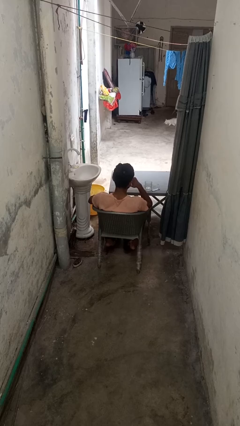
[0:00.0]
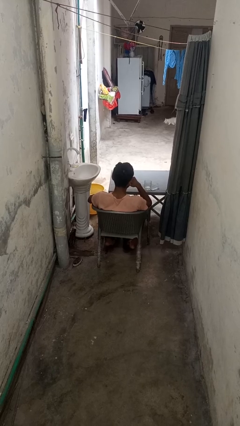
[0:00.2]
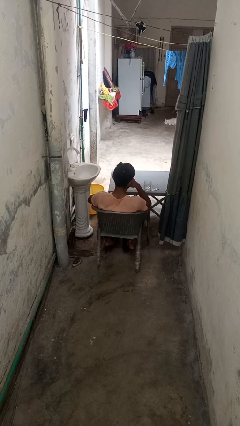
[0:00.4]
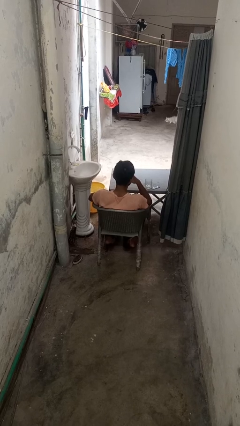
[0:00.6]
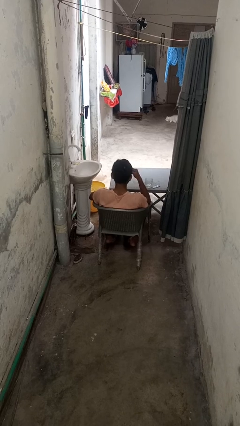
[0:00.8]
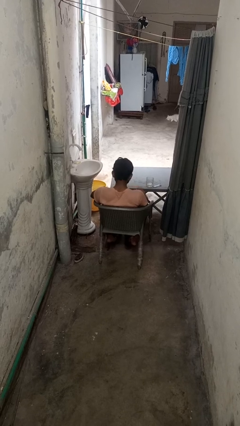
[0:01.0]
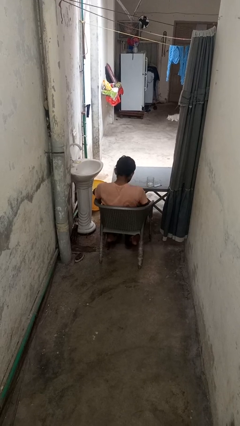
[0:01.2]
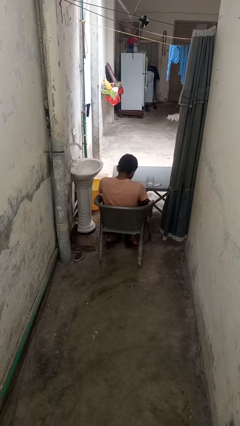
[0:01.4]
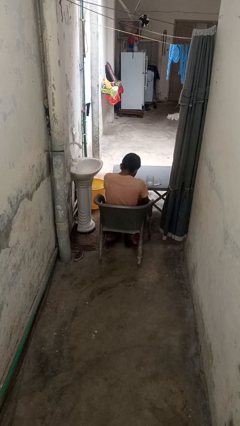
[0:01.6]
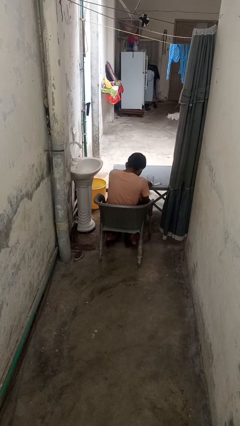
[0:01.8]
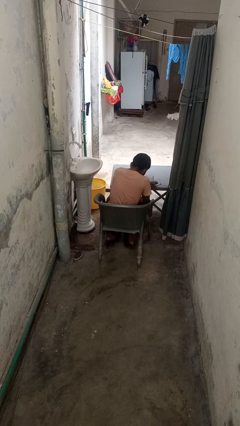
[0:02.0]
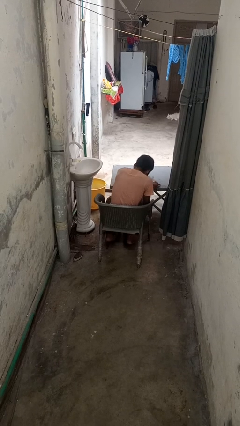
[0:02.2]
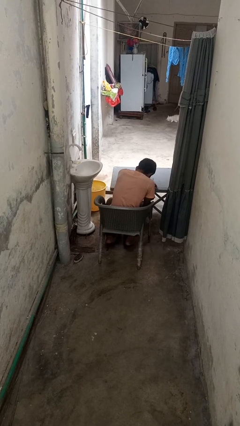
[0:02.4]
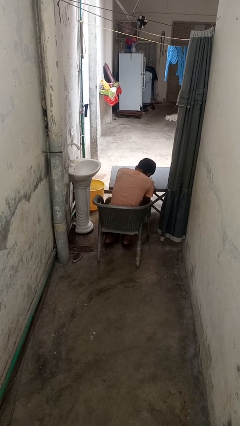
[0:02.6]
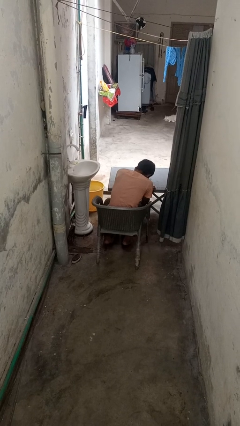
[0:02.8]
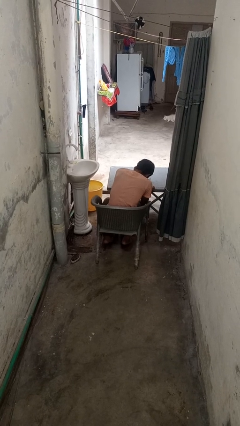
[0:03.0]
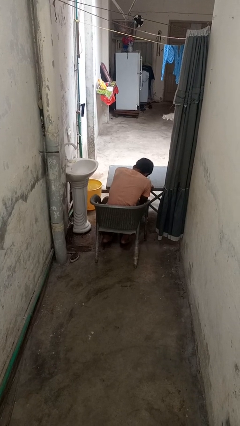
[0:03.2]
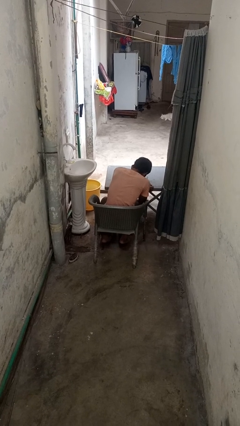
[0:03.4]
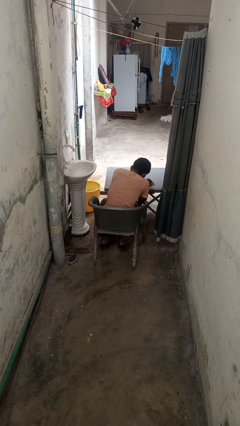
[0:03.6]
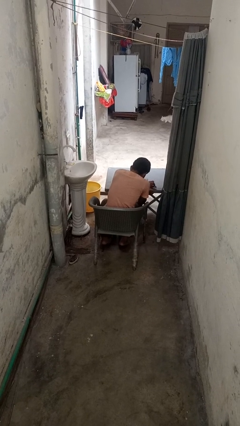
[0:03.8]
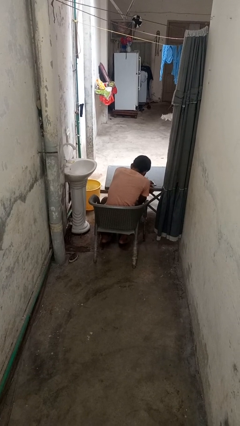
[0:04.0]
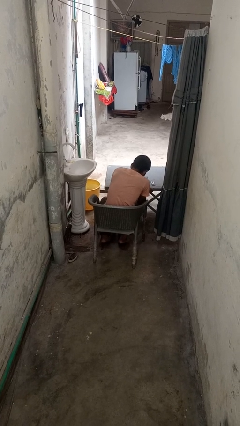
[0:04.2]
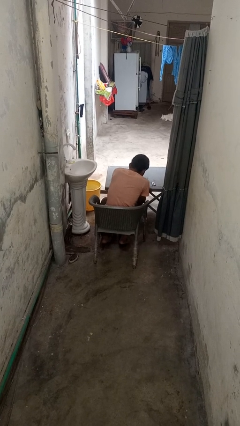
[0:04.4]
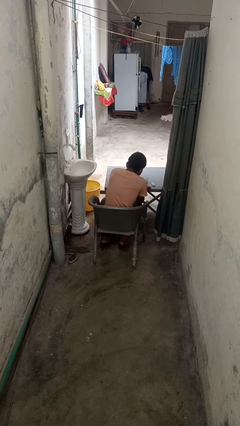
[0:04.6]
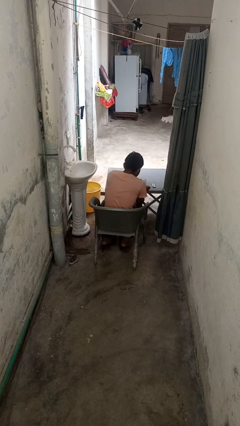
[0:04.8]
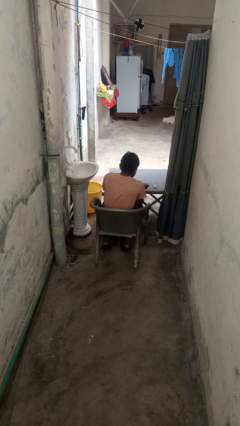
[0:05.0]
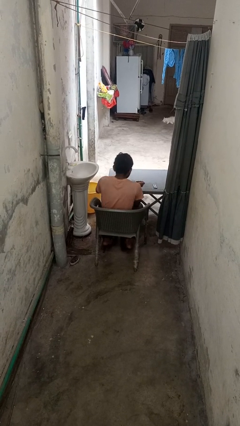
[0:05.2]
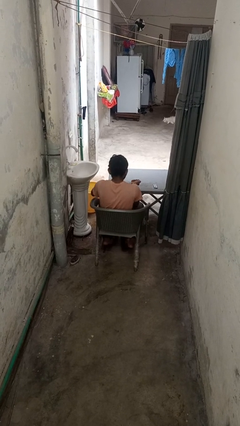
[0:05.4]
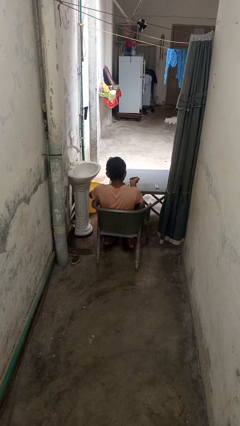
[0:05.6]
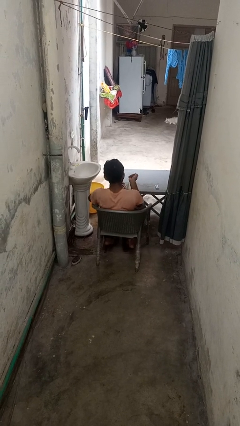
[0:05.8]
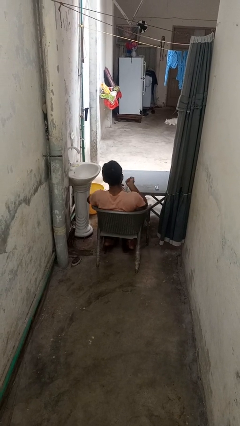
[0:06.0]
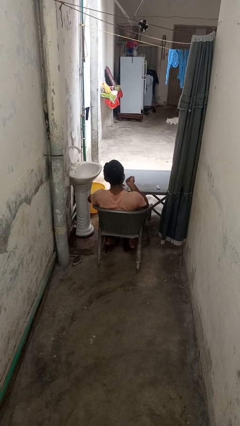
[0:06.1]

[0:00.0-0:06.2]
person takes medicine pills

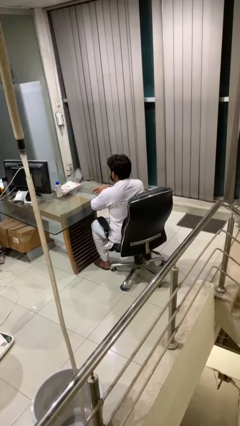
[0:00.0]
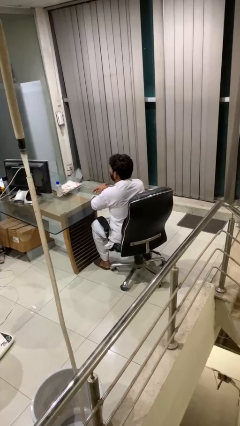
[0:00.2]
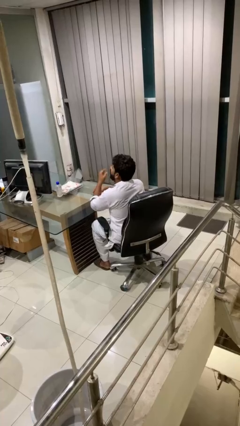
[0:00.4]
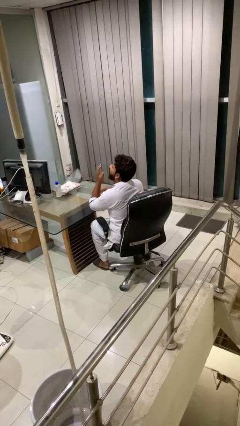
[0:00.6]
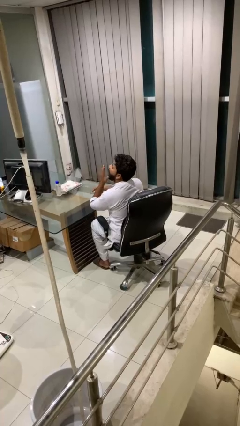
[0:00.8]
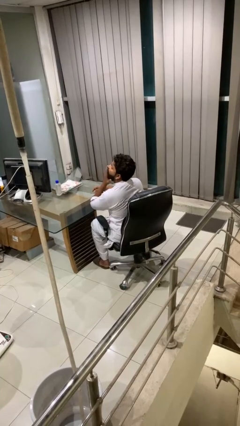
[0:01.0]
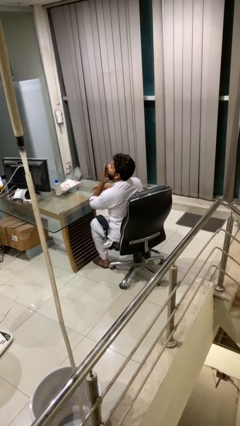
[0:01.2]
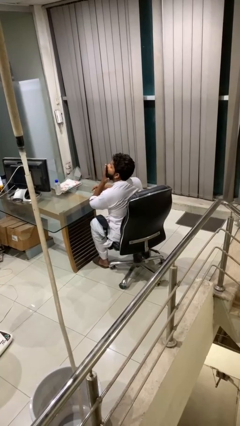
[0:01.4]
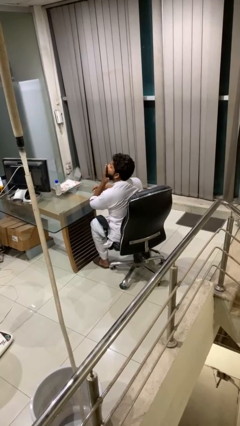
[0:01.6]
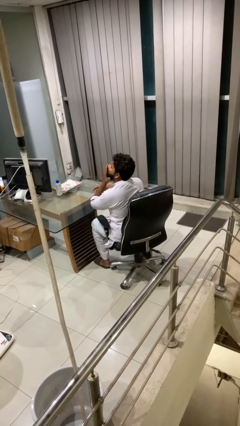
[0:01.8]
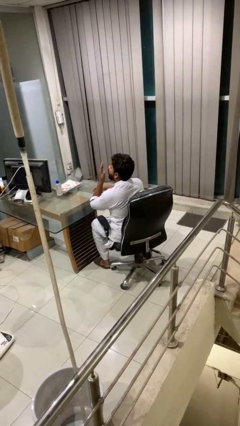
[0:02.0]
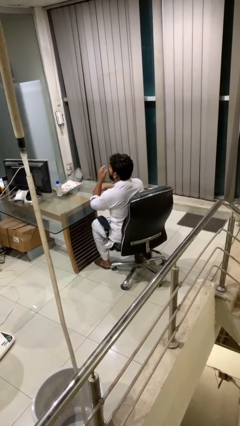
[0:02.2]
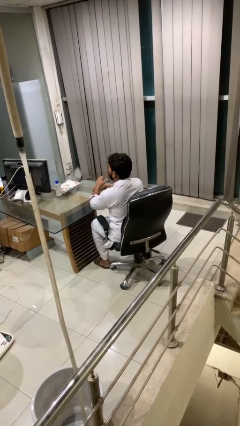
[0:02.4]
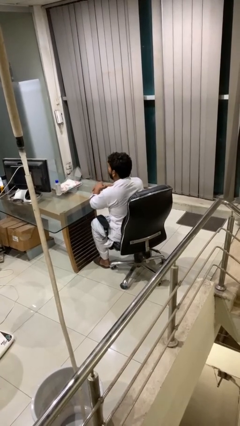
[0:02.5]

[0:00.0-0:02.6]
person yawns

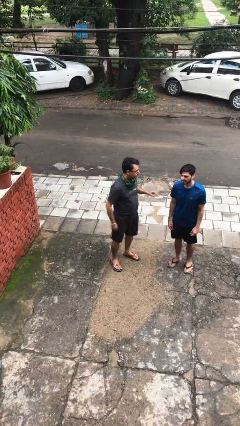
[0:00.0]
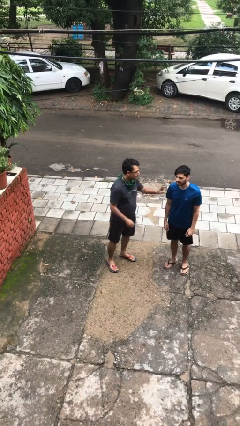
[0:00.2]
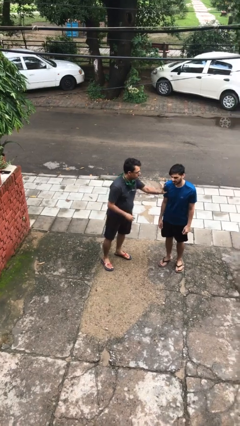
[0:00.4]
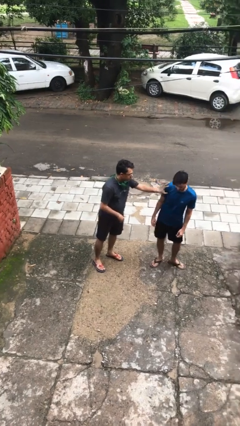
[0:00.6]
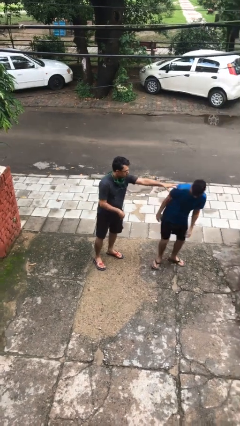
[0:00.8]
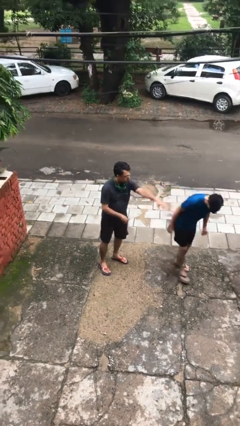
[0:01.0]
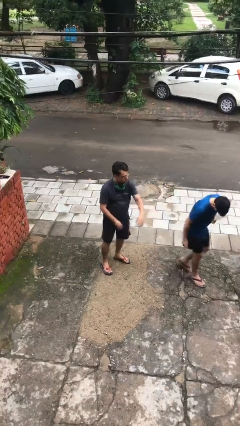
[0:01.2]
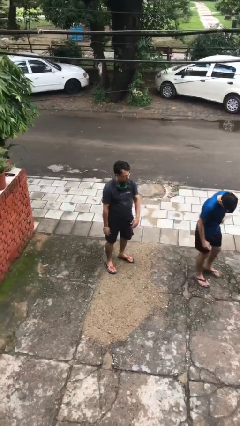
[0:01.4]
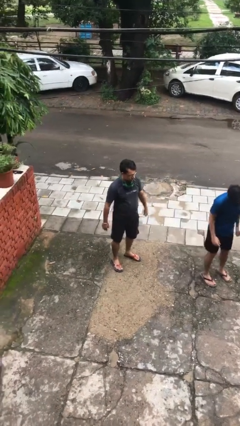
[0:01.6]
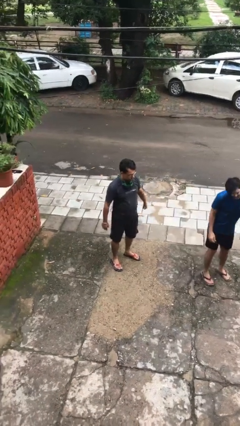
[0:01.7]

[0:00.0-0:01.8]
person shoves person

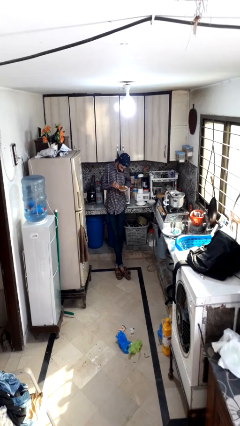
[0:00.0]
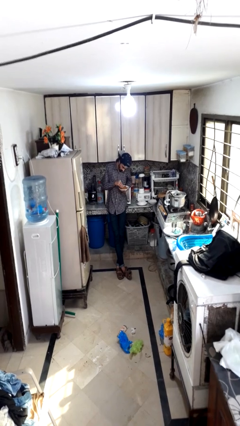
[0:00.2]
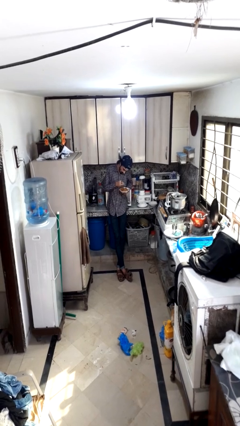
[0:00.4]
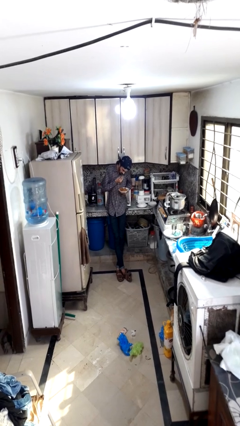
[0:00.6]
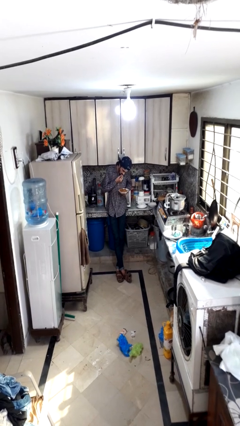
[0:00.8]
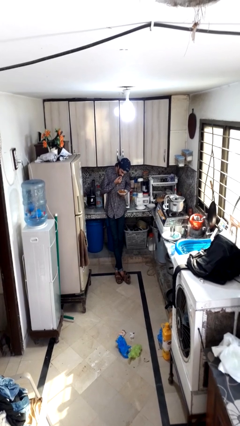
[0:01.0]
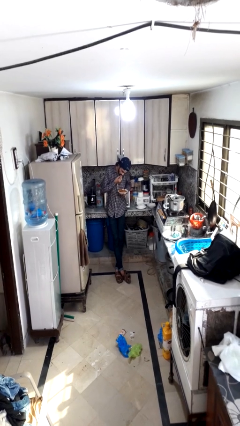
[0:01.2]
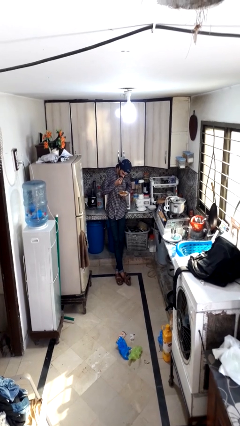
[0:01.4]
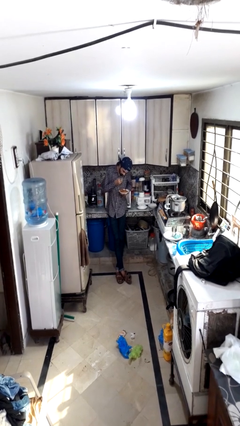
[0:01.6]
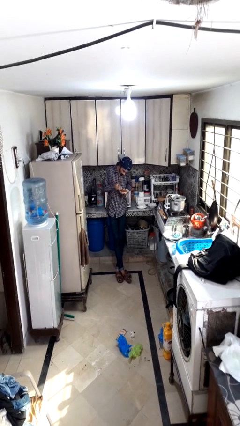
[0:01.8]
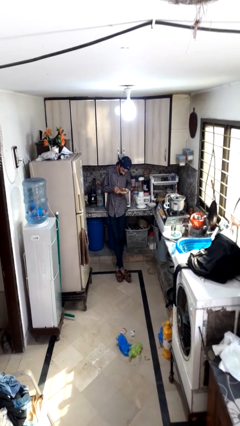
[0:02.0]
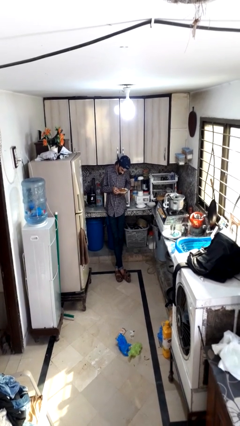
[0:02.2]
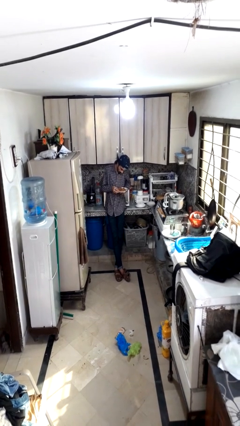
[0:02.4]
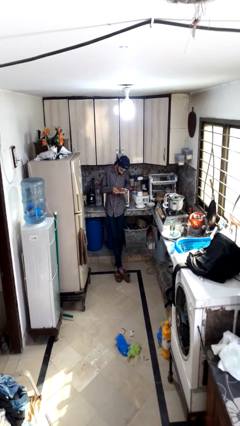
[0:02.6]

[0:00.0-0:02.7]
person eats with hands

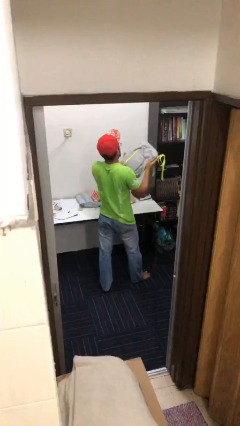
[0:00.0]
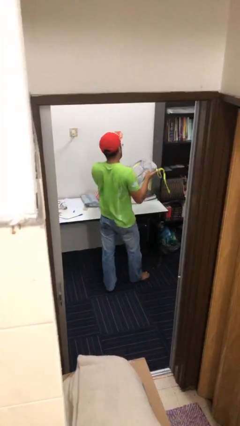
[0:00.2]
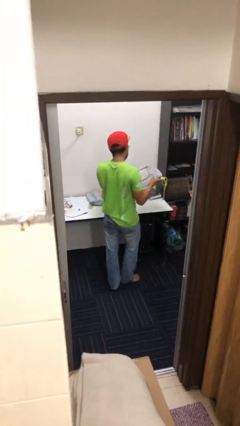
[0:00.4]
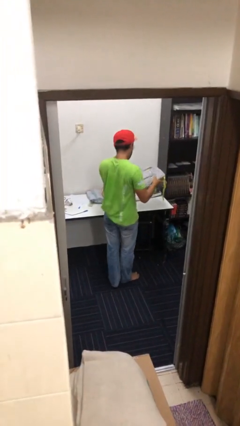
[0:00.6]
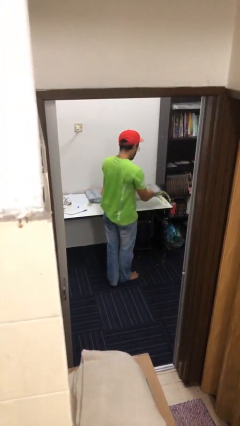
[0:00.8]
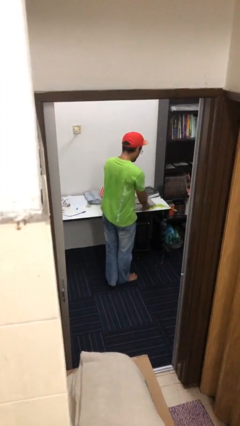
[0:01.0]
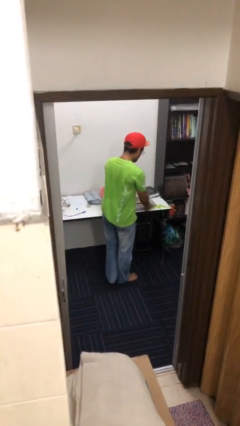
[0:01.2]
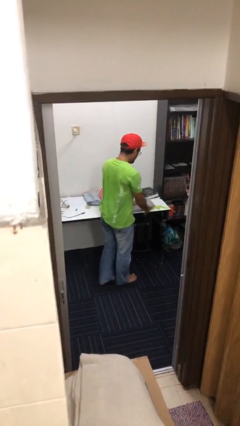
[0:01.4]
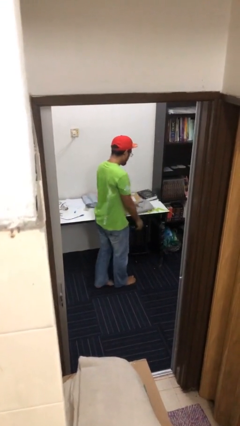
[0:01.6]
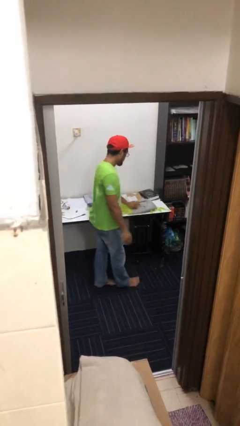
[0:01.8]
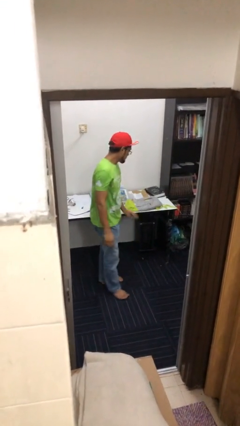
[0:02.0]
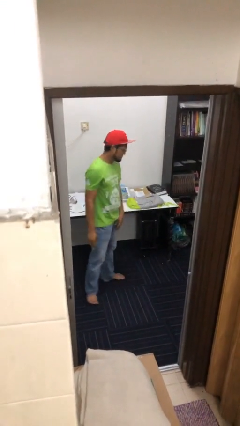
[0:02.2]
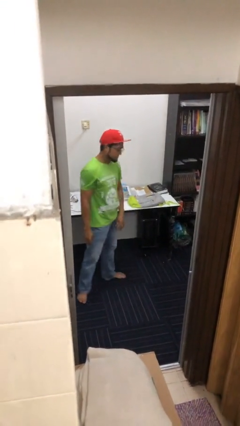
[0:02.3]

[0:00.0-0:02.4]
person puts down object on table

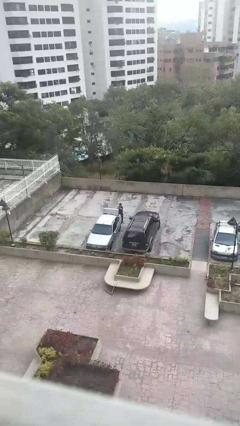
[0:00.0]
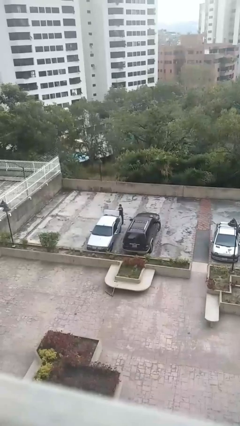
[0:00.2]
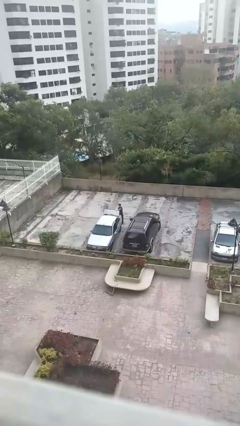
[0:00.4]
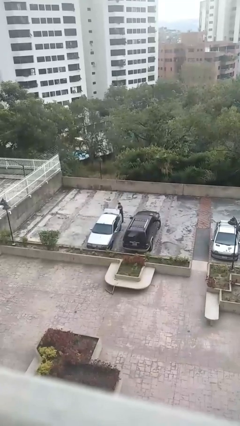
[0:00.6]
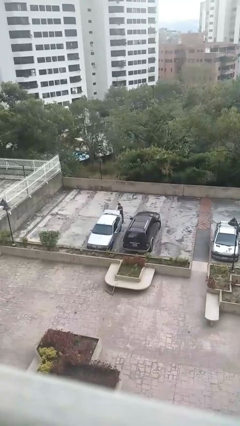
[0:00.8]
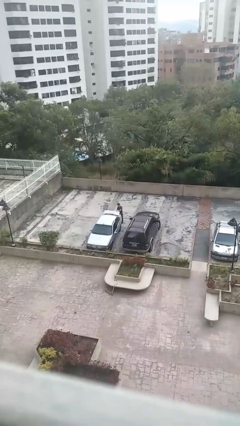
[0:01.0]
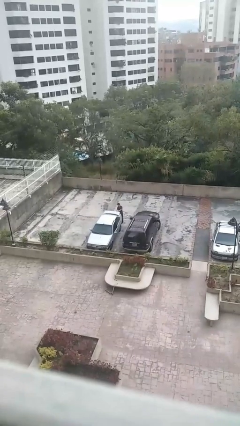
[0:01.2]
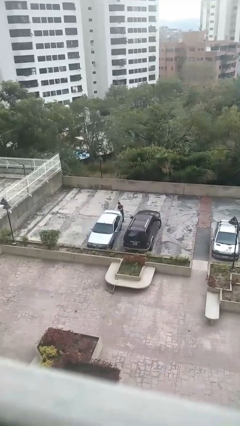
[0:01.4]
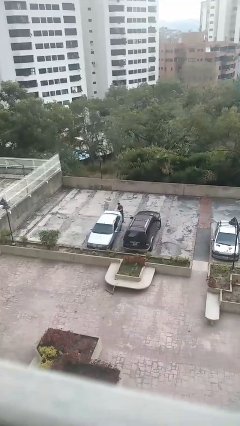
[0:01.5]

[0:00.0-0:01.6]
person closes car trunk

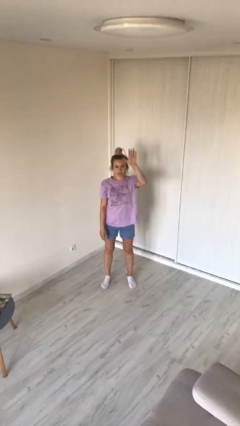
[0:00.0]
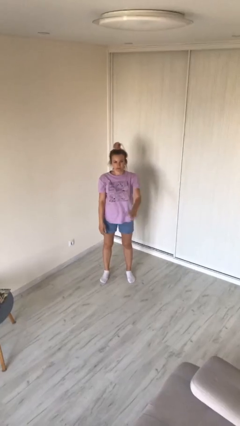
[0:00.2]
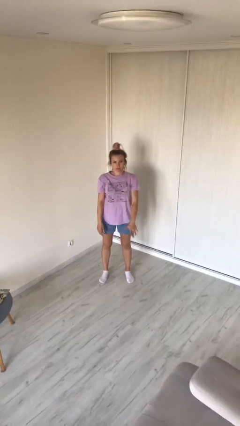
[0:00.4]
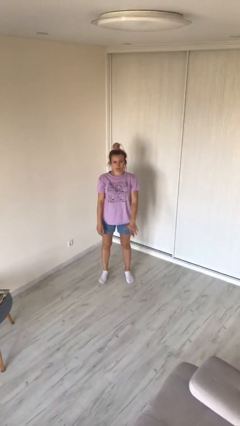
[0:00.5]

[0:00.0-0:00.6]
person gestures swipe down
